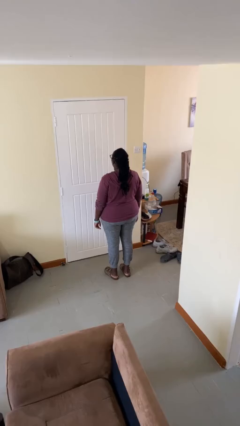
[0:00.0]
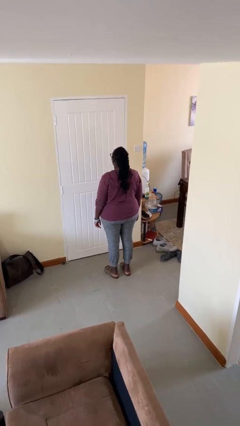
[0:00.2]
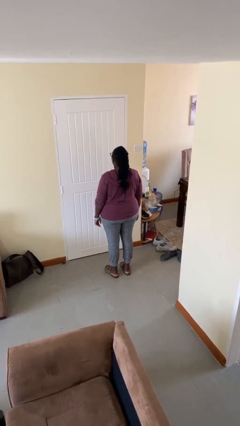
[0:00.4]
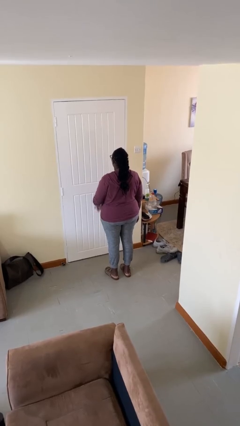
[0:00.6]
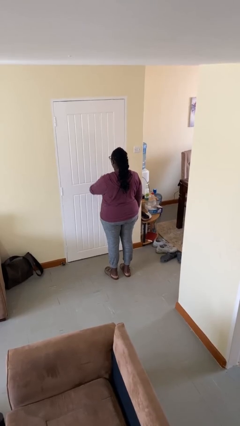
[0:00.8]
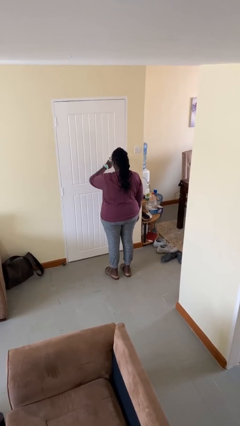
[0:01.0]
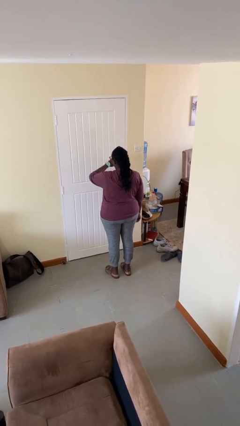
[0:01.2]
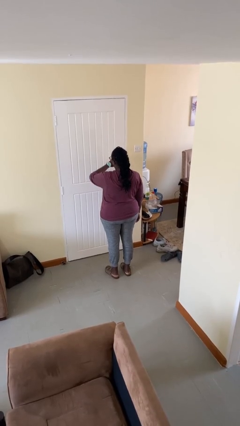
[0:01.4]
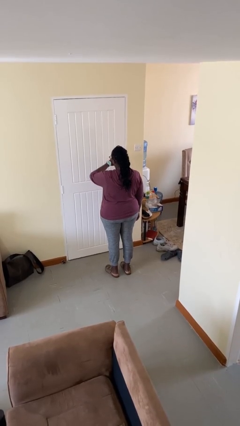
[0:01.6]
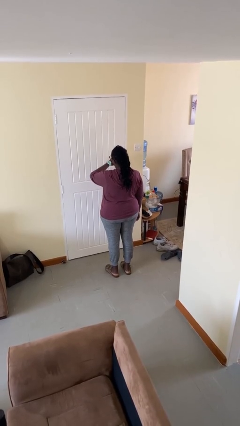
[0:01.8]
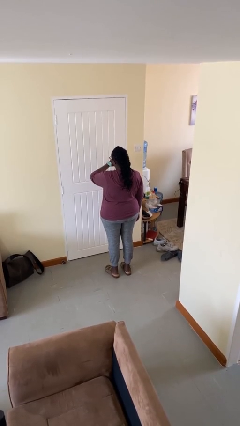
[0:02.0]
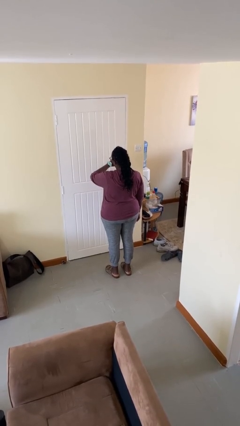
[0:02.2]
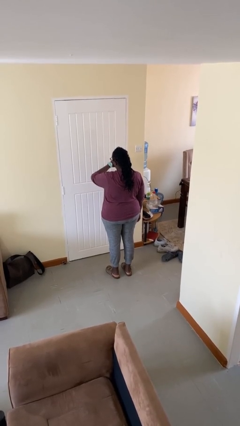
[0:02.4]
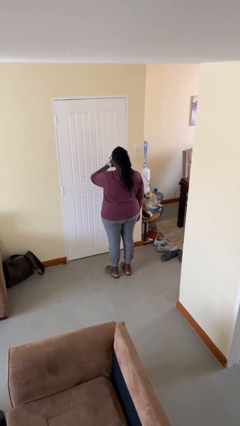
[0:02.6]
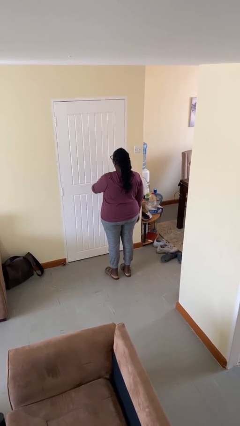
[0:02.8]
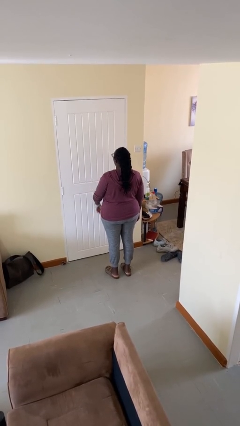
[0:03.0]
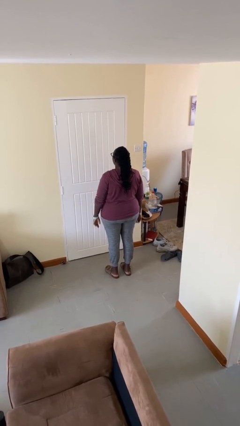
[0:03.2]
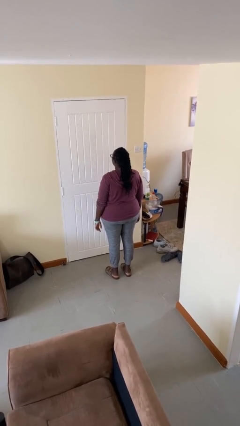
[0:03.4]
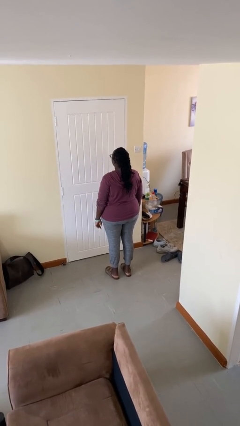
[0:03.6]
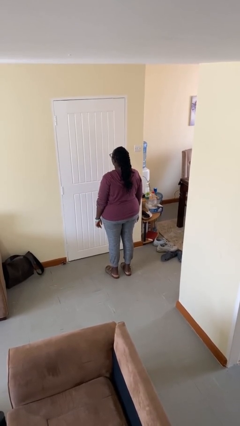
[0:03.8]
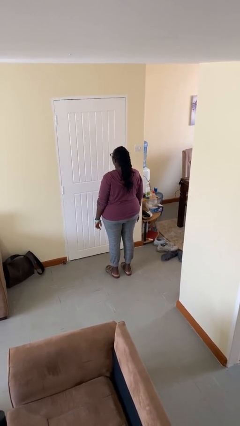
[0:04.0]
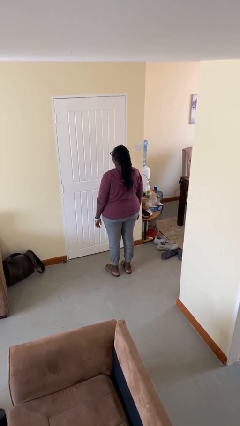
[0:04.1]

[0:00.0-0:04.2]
person looks at wristwatch

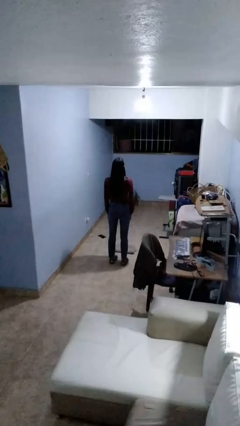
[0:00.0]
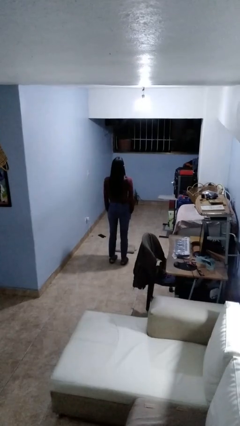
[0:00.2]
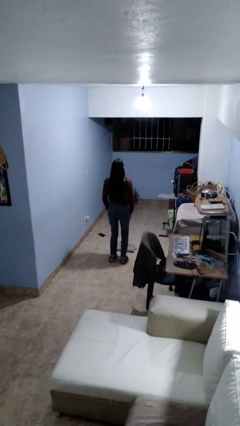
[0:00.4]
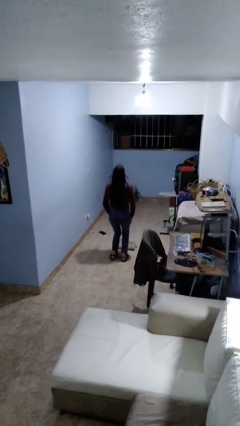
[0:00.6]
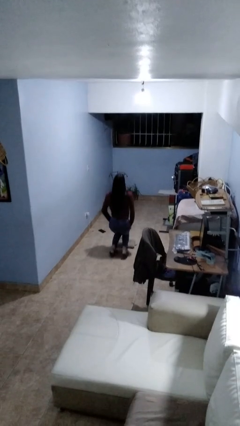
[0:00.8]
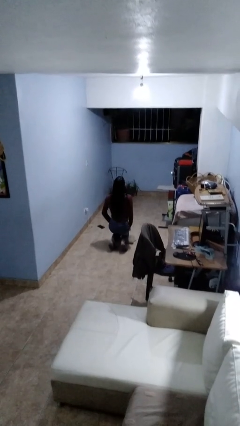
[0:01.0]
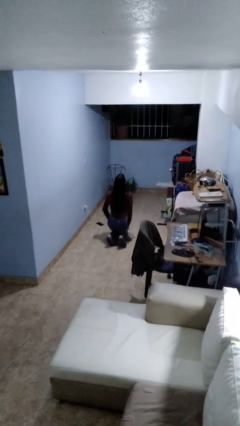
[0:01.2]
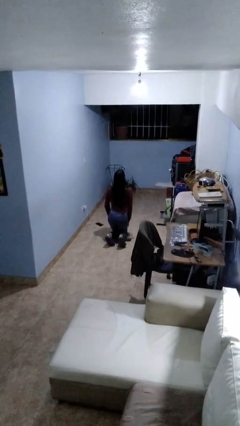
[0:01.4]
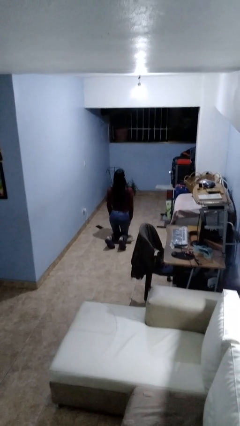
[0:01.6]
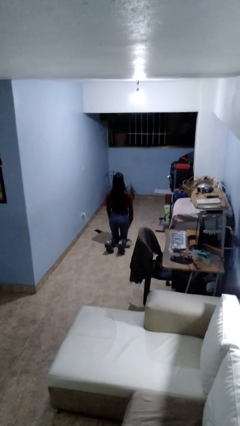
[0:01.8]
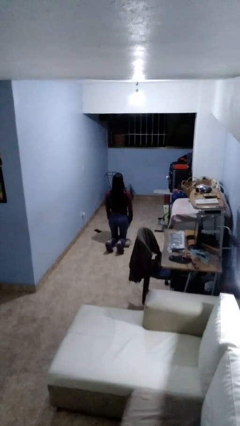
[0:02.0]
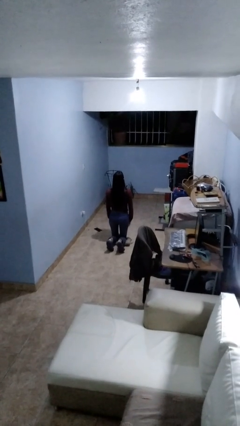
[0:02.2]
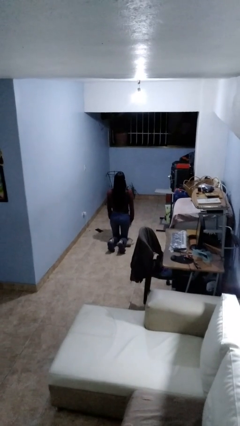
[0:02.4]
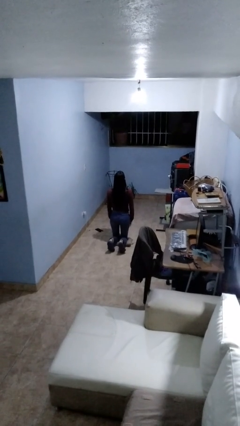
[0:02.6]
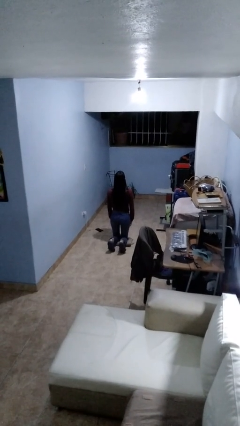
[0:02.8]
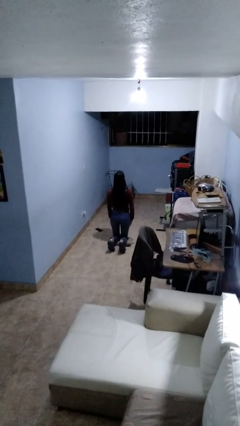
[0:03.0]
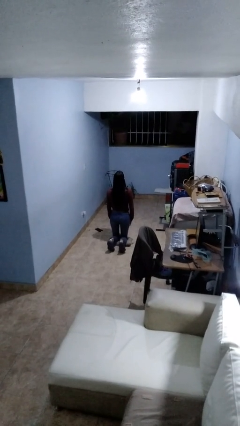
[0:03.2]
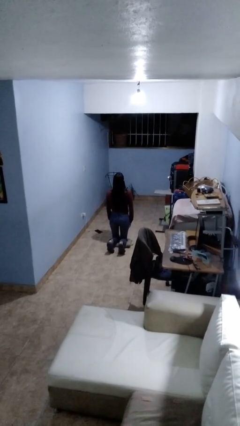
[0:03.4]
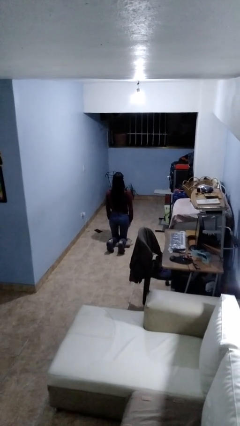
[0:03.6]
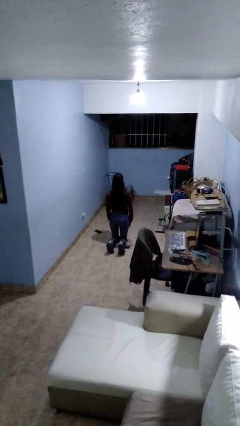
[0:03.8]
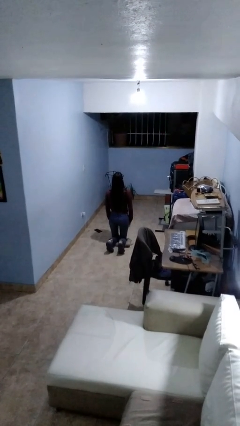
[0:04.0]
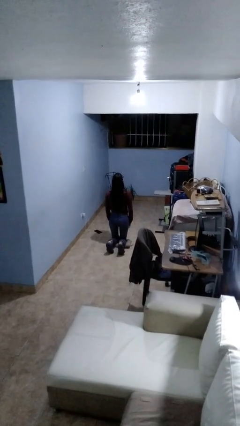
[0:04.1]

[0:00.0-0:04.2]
person kneels

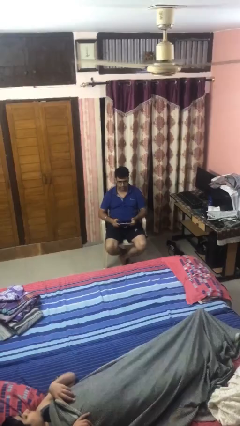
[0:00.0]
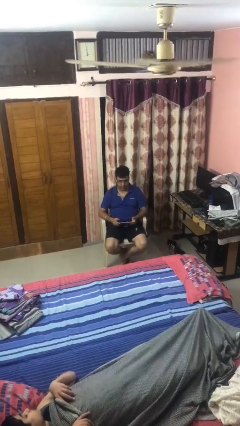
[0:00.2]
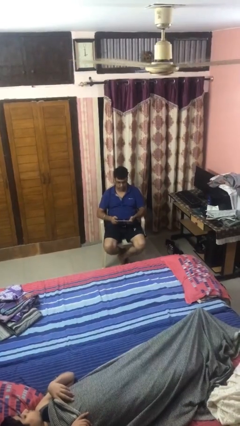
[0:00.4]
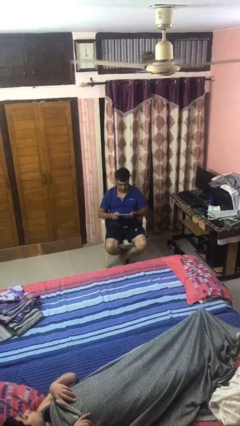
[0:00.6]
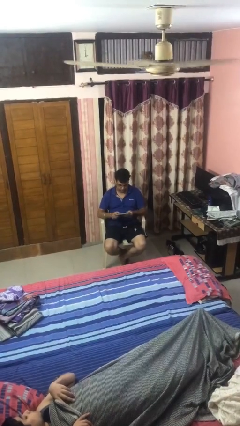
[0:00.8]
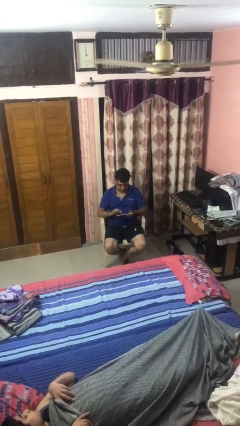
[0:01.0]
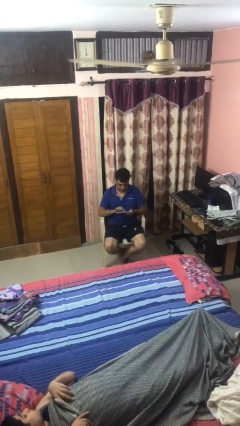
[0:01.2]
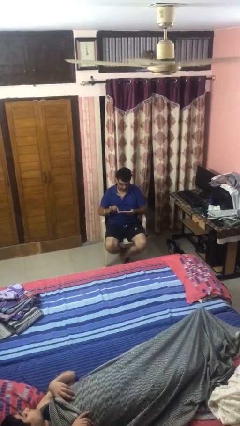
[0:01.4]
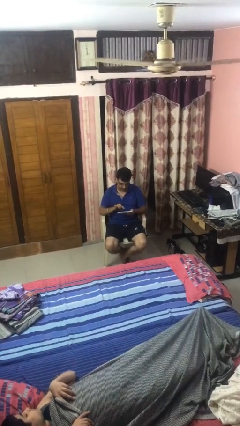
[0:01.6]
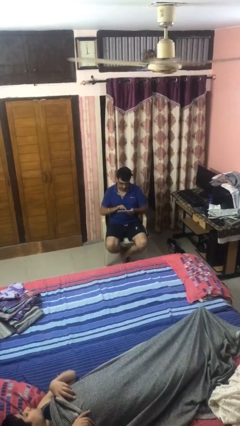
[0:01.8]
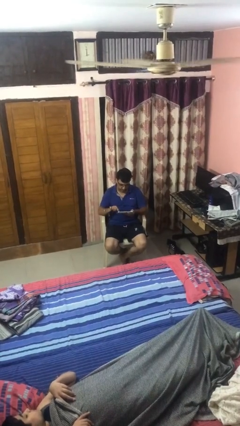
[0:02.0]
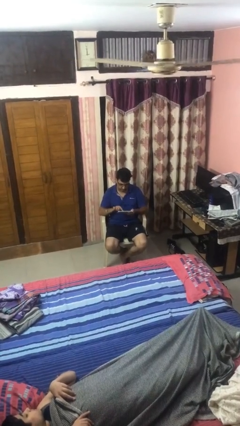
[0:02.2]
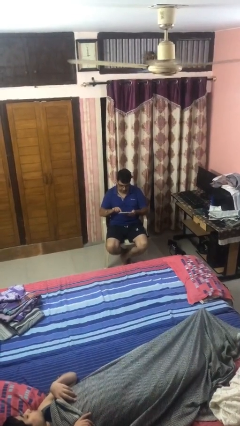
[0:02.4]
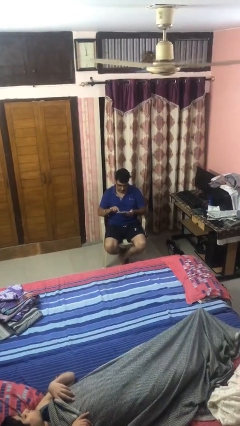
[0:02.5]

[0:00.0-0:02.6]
person interacts with tablet

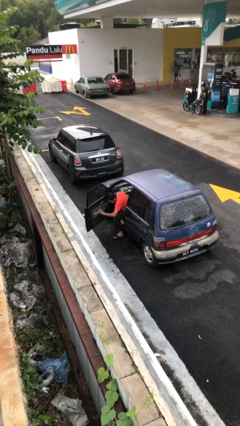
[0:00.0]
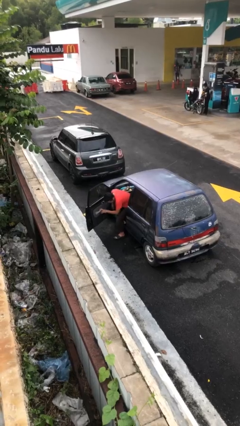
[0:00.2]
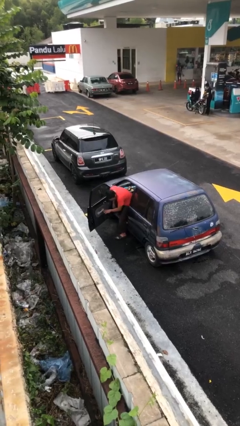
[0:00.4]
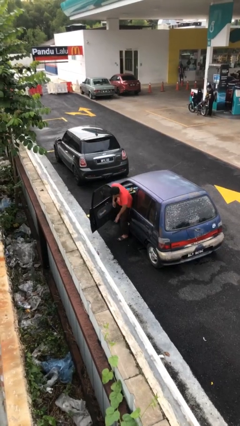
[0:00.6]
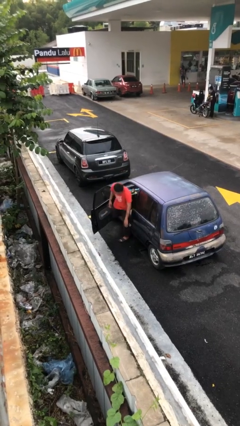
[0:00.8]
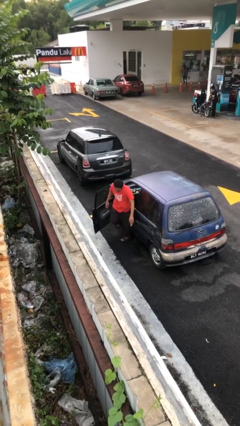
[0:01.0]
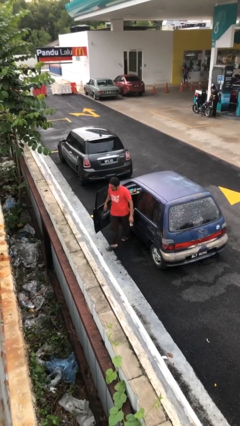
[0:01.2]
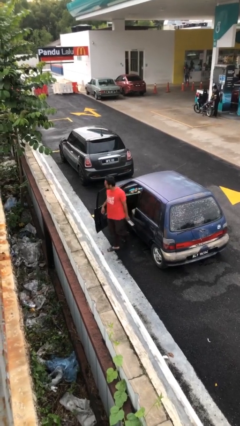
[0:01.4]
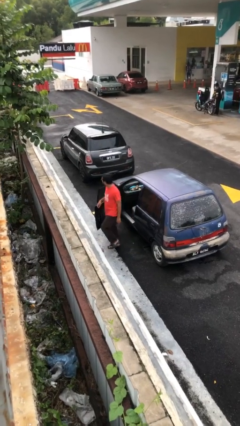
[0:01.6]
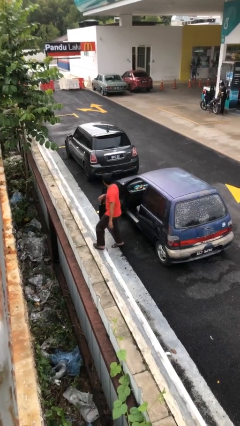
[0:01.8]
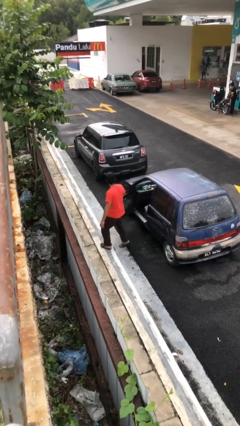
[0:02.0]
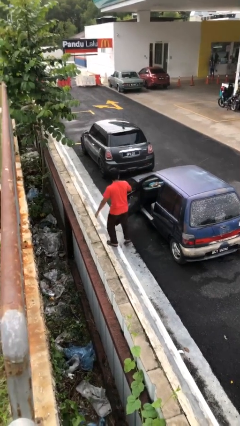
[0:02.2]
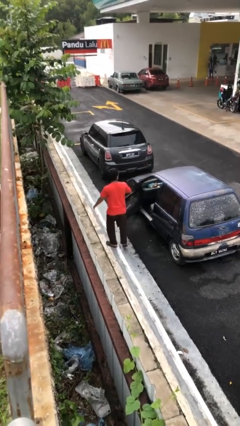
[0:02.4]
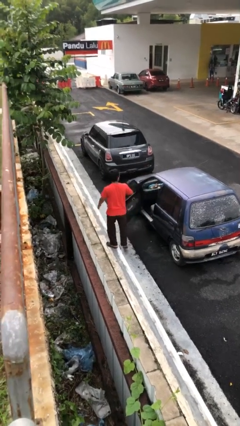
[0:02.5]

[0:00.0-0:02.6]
person exits car

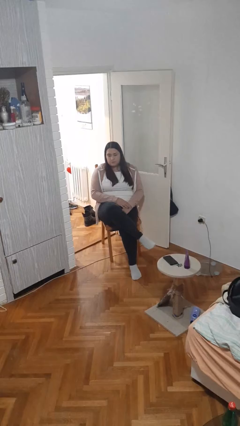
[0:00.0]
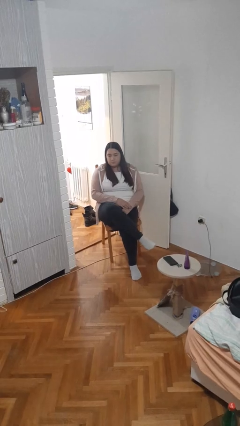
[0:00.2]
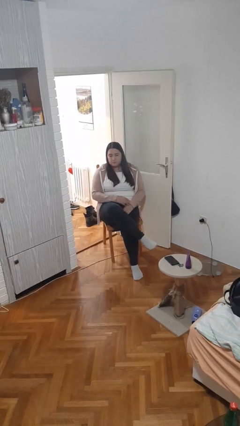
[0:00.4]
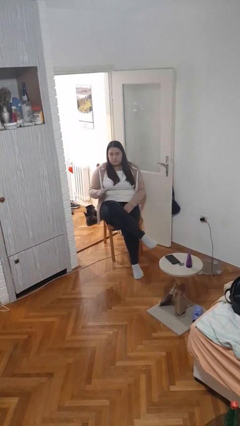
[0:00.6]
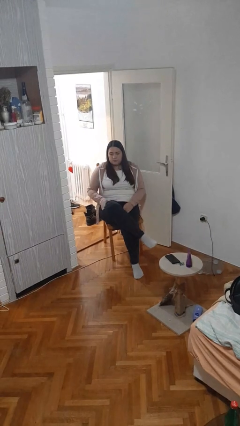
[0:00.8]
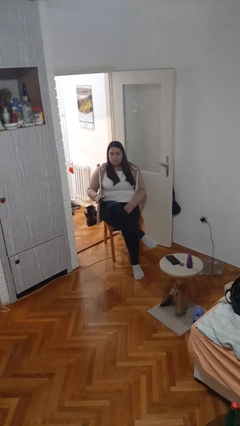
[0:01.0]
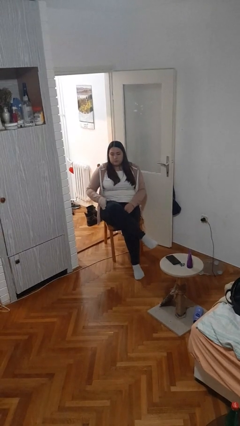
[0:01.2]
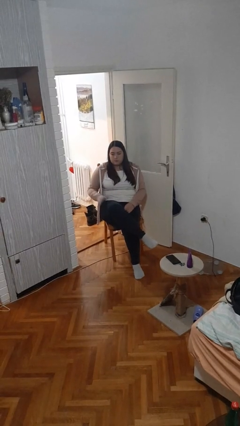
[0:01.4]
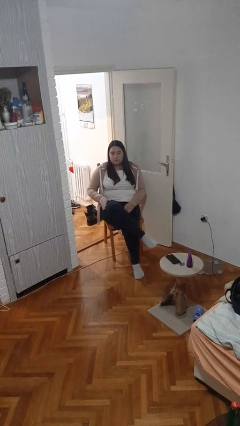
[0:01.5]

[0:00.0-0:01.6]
person slaps hands on thighs

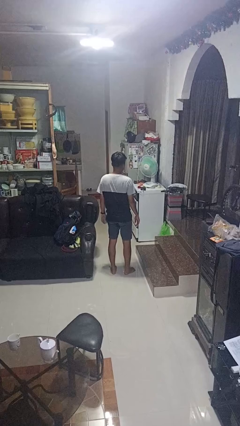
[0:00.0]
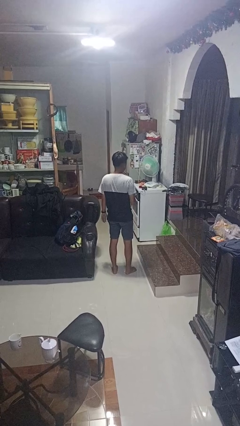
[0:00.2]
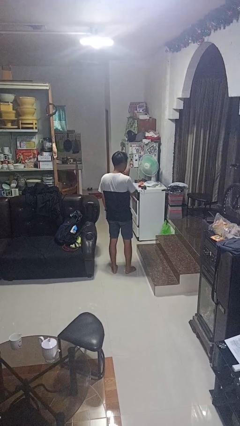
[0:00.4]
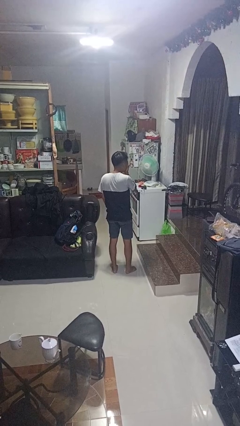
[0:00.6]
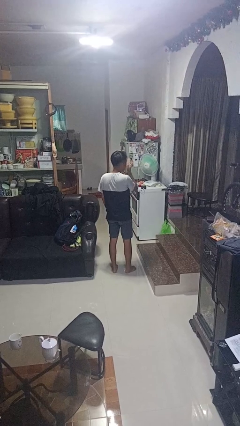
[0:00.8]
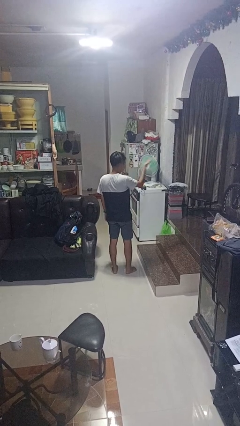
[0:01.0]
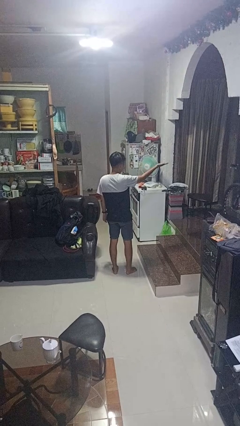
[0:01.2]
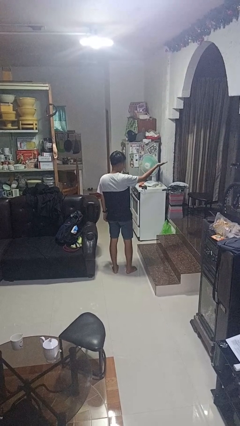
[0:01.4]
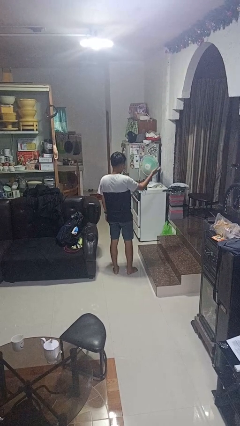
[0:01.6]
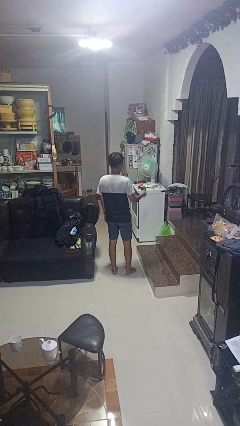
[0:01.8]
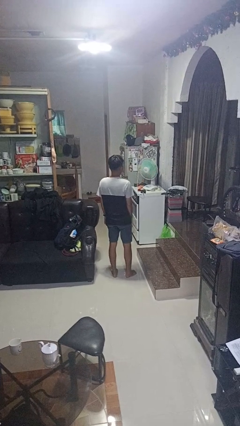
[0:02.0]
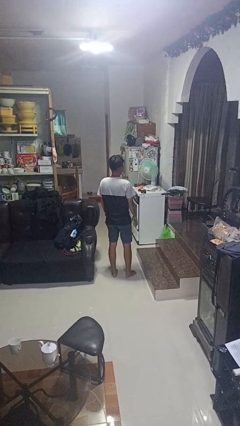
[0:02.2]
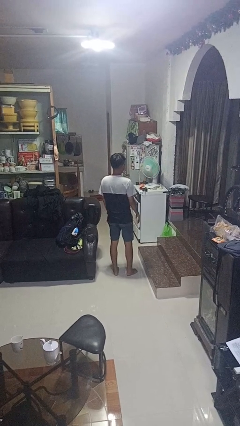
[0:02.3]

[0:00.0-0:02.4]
person gestures blow kiss
